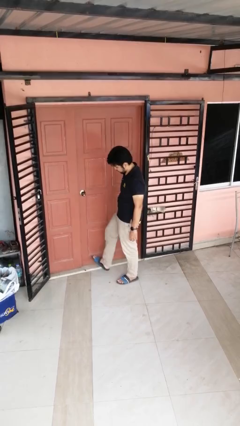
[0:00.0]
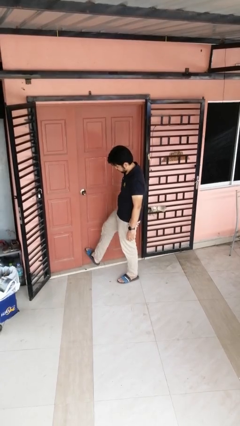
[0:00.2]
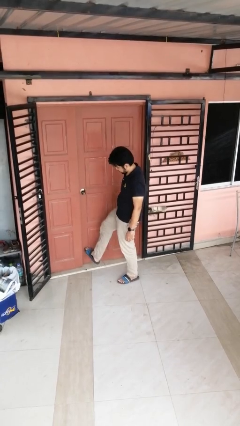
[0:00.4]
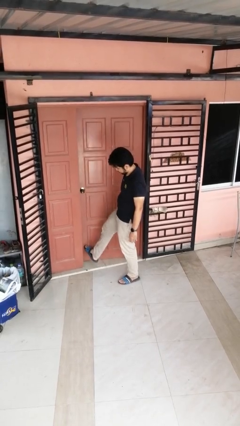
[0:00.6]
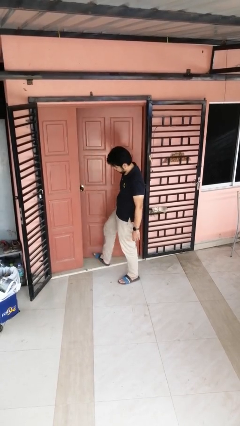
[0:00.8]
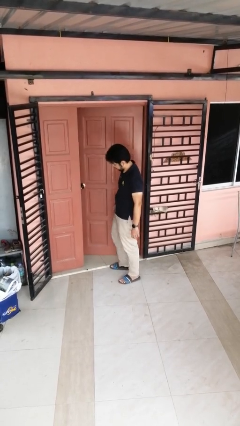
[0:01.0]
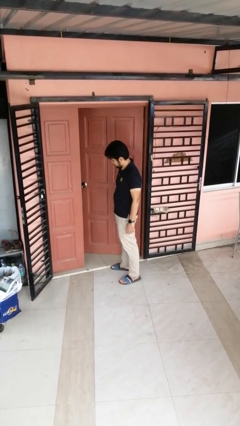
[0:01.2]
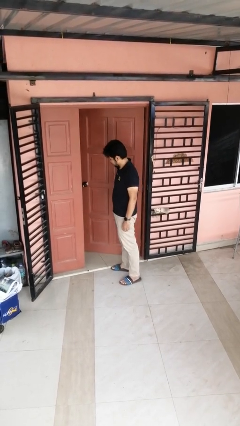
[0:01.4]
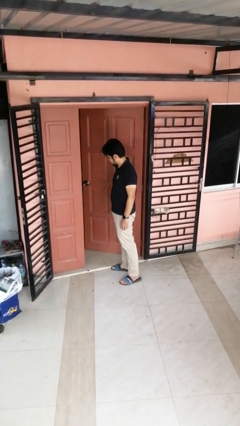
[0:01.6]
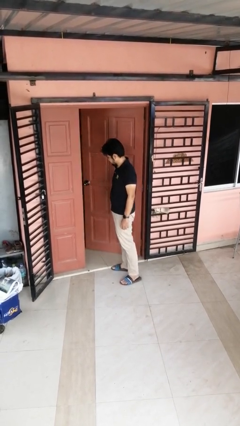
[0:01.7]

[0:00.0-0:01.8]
person opens facility door

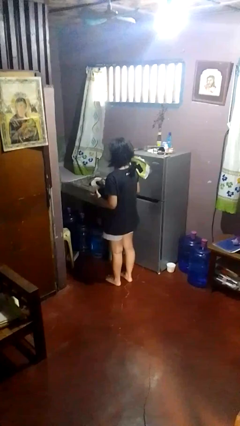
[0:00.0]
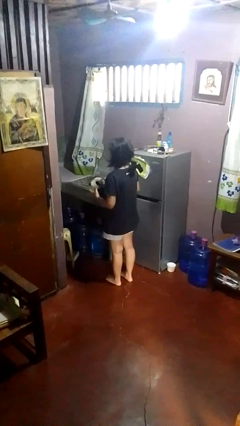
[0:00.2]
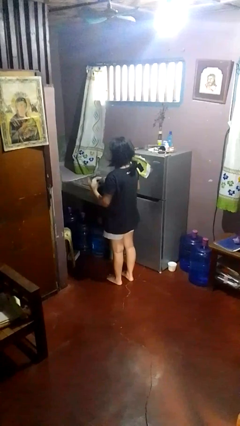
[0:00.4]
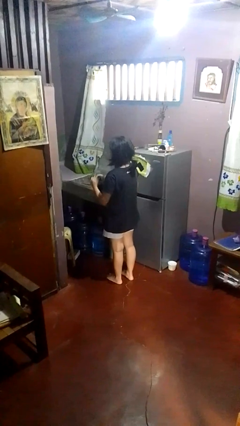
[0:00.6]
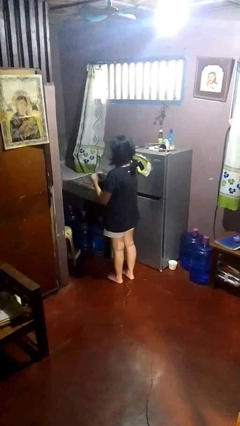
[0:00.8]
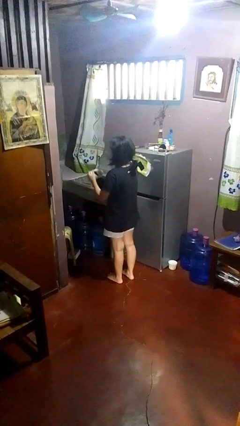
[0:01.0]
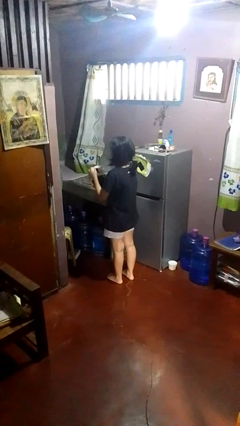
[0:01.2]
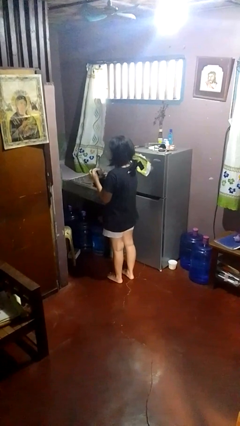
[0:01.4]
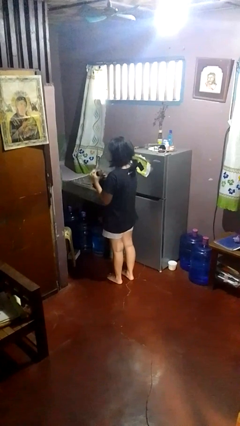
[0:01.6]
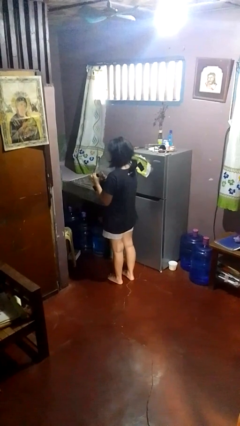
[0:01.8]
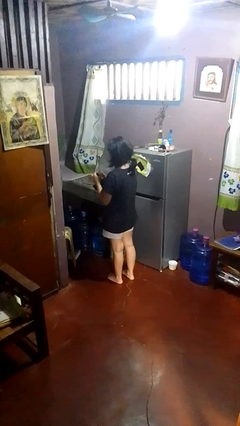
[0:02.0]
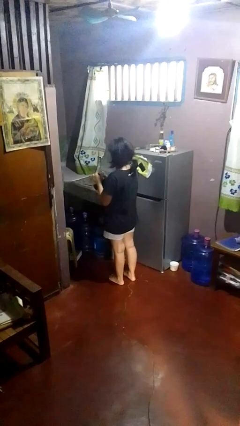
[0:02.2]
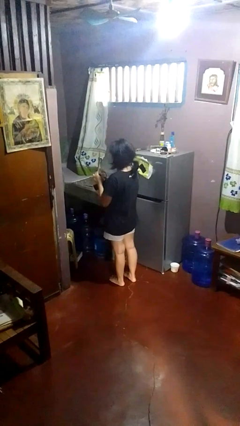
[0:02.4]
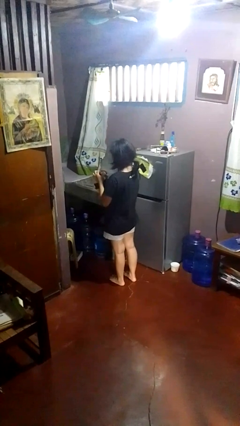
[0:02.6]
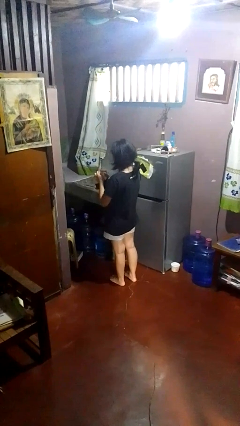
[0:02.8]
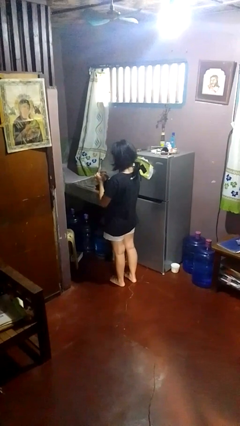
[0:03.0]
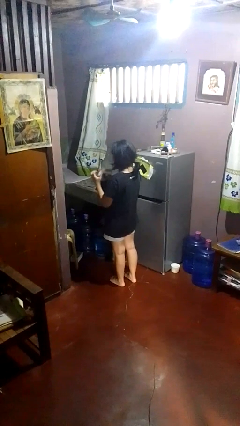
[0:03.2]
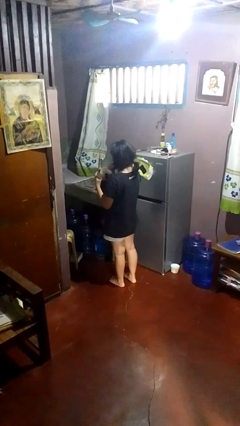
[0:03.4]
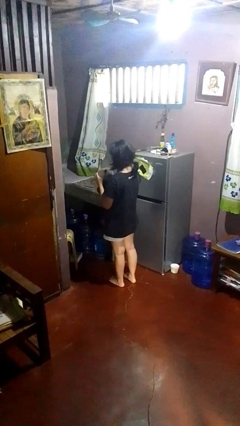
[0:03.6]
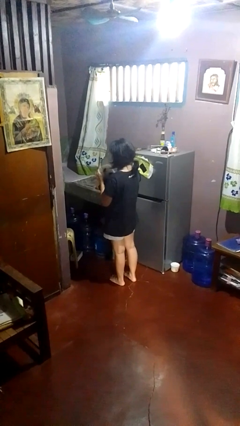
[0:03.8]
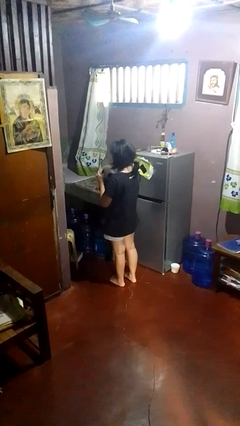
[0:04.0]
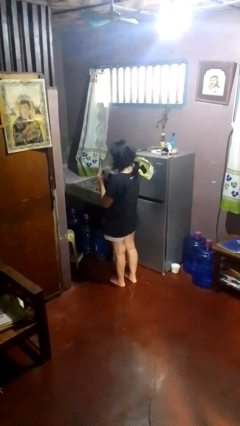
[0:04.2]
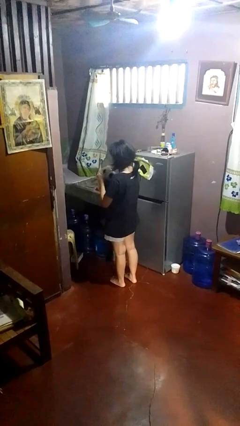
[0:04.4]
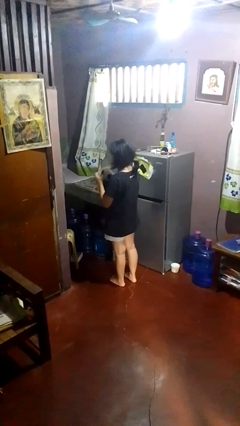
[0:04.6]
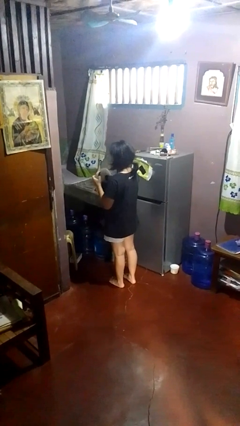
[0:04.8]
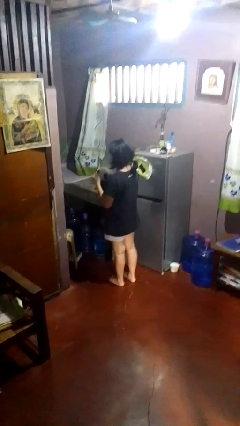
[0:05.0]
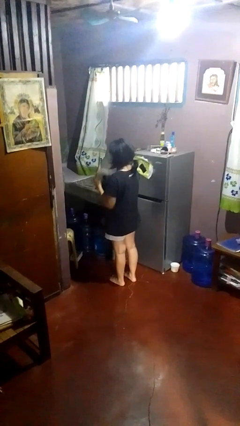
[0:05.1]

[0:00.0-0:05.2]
person squeezes object

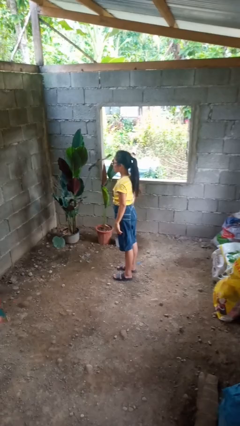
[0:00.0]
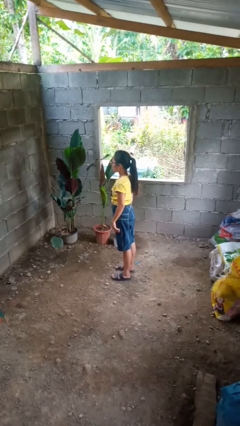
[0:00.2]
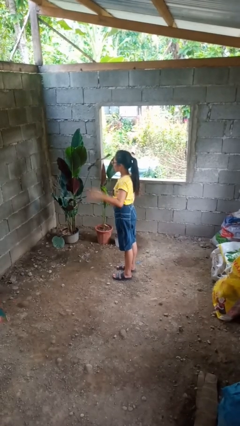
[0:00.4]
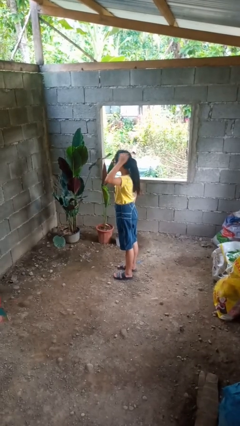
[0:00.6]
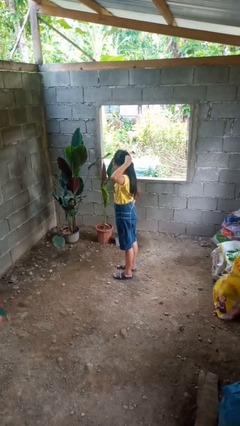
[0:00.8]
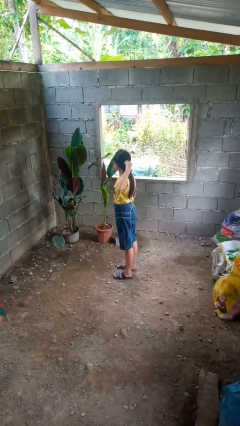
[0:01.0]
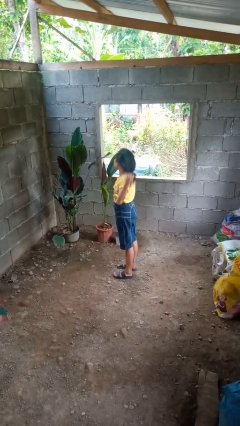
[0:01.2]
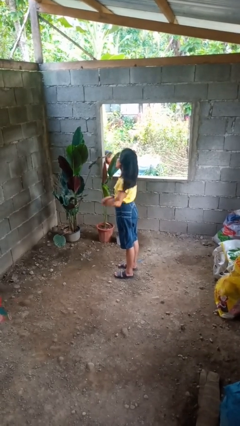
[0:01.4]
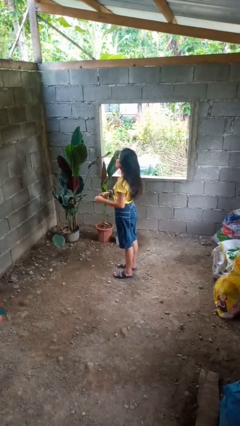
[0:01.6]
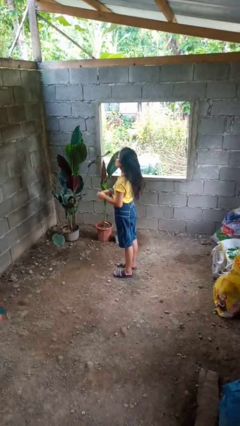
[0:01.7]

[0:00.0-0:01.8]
person takes off hairtie

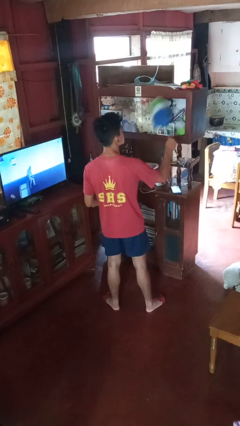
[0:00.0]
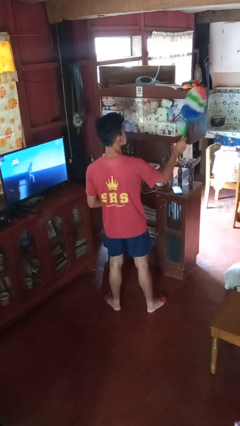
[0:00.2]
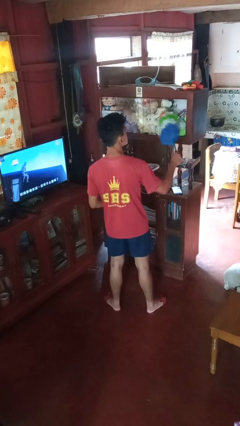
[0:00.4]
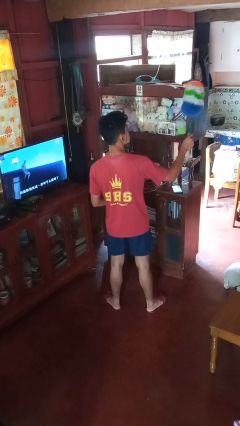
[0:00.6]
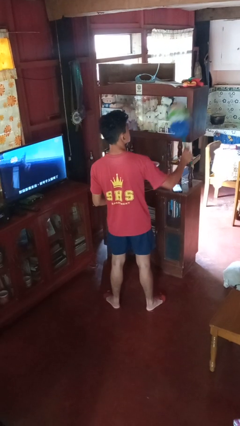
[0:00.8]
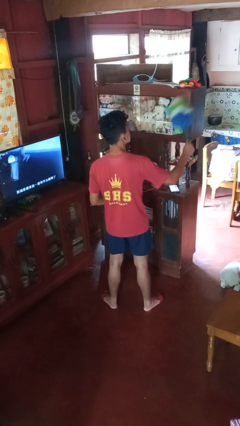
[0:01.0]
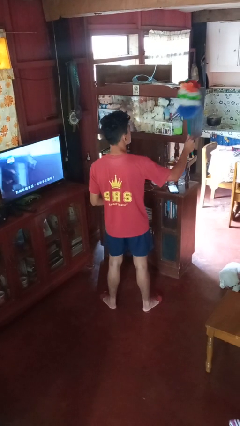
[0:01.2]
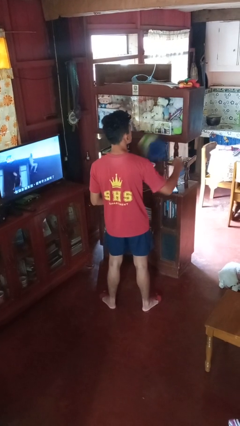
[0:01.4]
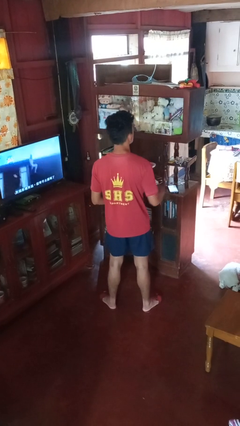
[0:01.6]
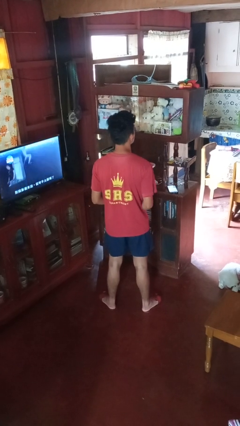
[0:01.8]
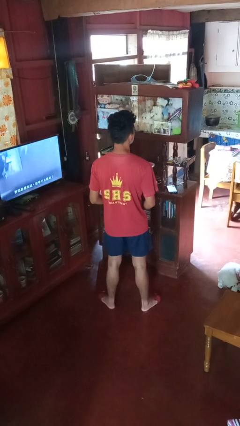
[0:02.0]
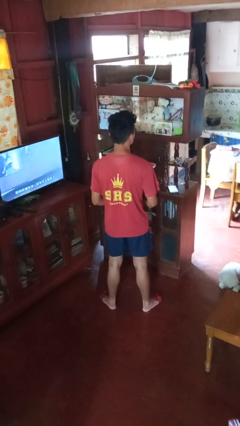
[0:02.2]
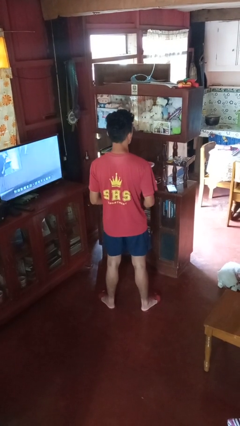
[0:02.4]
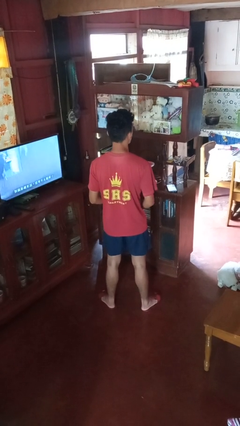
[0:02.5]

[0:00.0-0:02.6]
person dusts furniture

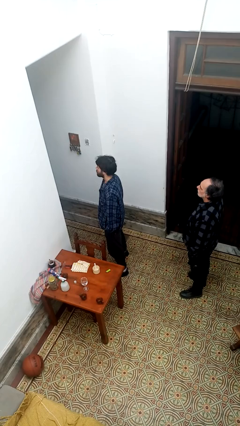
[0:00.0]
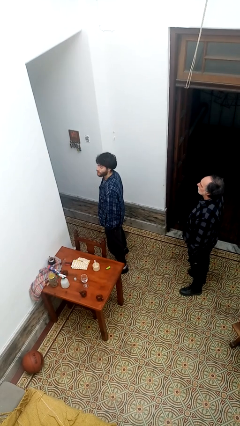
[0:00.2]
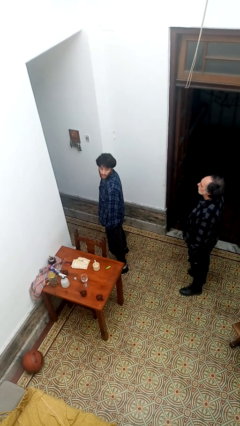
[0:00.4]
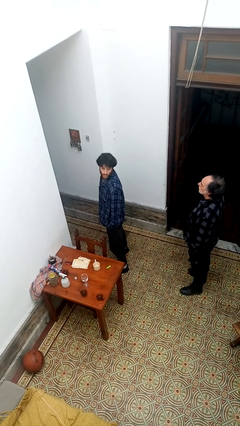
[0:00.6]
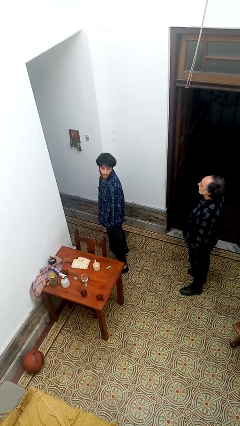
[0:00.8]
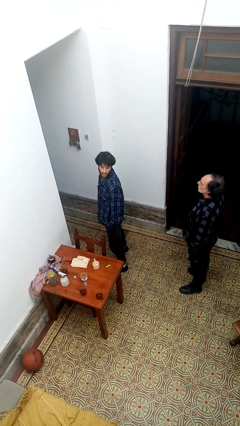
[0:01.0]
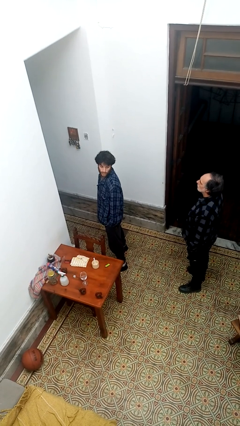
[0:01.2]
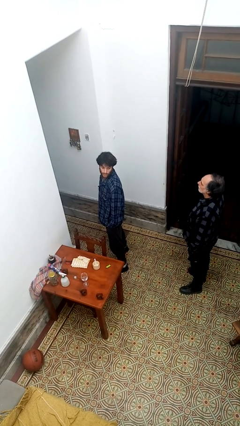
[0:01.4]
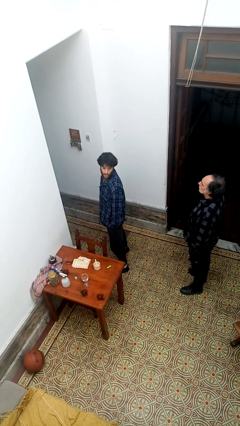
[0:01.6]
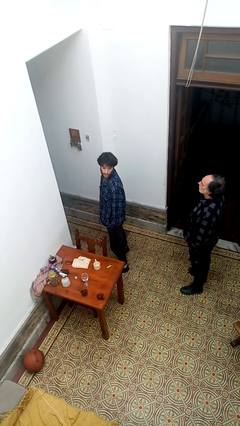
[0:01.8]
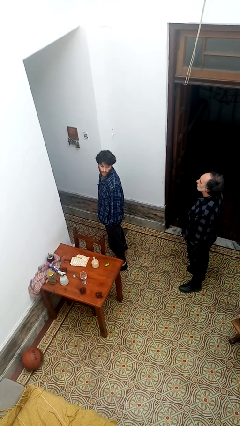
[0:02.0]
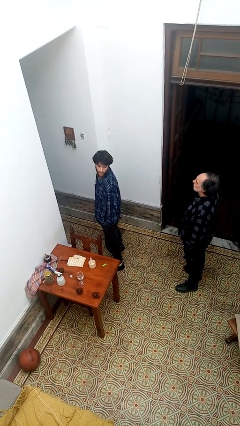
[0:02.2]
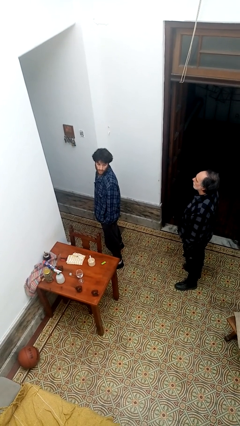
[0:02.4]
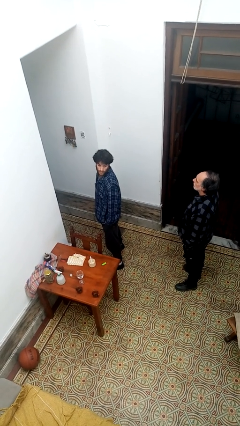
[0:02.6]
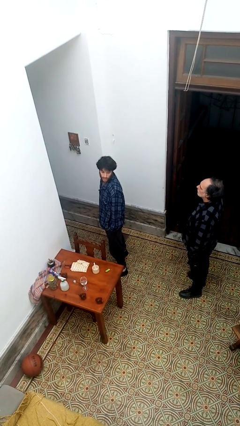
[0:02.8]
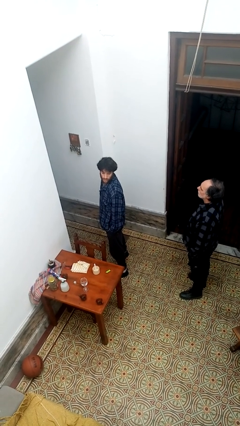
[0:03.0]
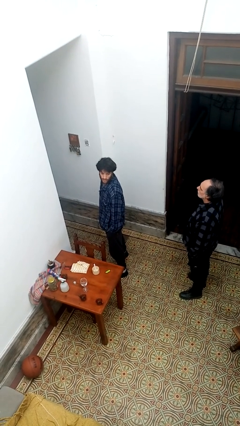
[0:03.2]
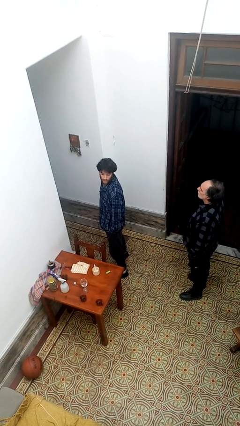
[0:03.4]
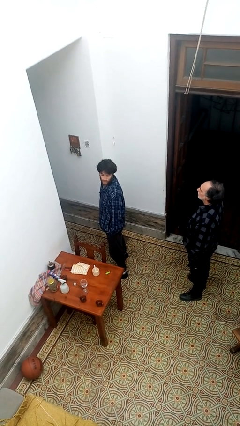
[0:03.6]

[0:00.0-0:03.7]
person looks over shoulder

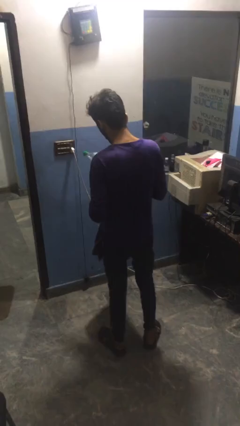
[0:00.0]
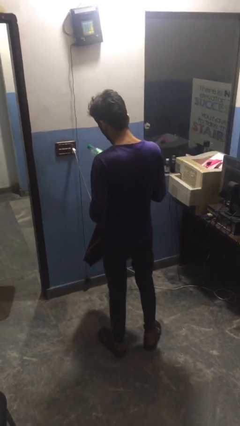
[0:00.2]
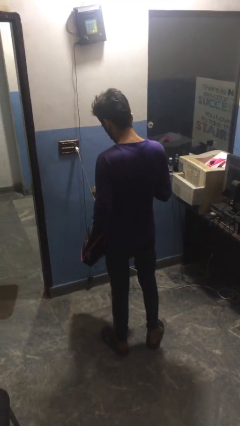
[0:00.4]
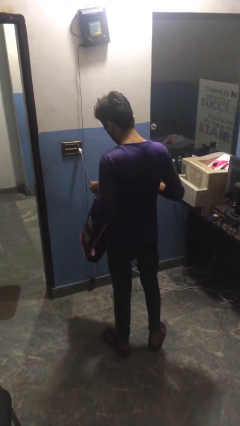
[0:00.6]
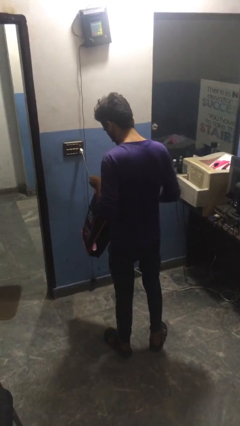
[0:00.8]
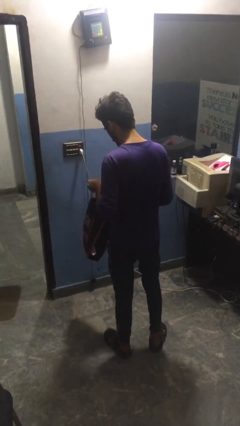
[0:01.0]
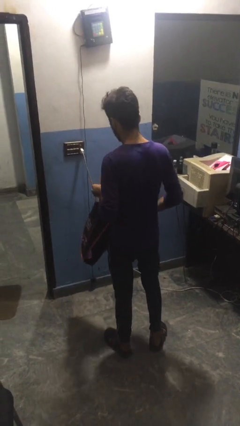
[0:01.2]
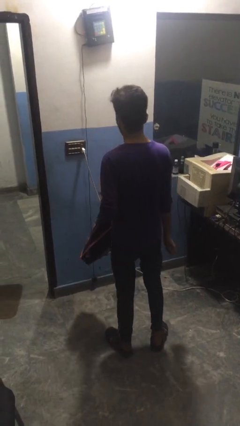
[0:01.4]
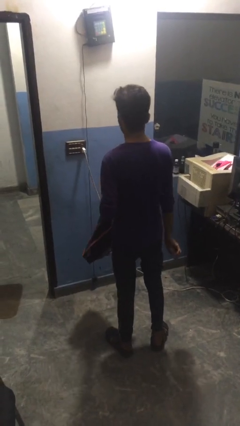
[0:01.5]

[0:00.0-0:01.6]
person puts object into bag

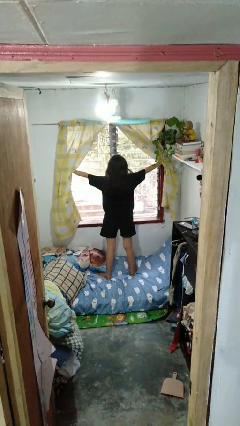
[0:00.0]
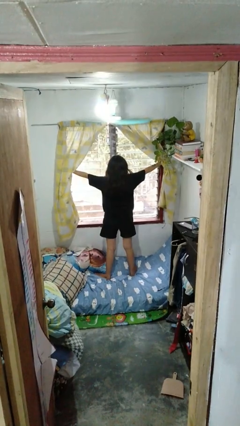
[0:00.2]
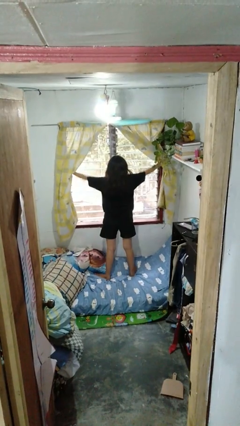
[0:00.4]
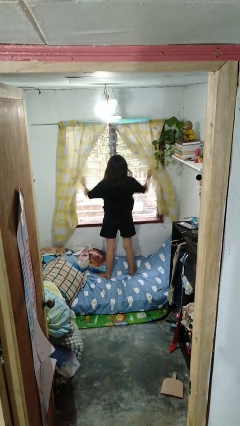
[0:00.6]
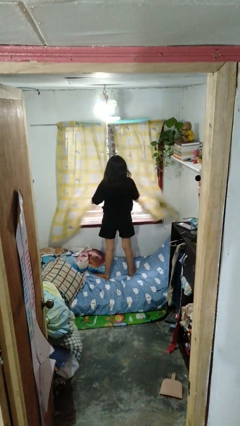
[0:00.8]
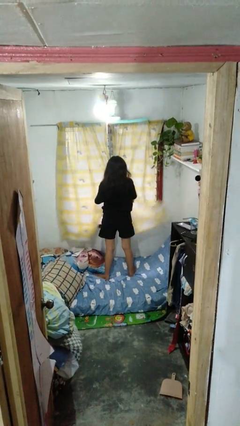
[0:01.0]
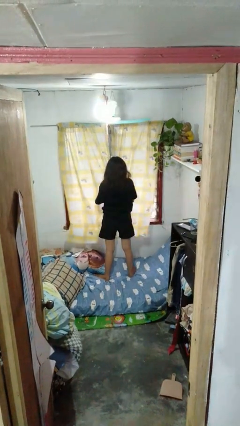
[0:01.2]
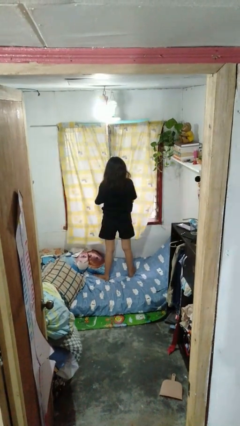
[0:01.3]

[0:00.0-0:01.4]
person closes curtains
